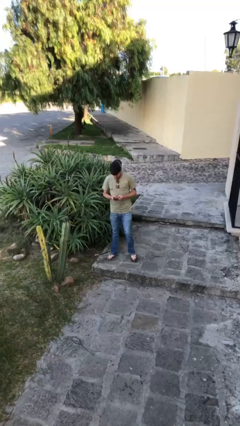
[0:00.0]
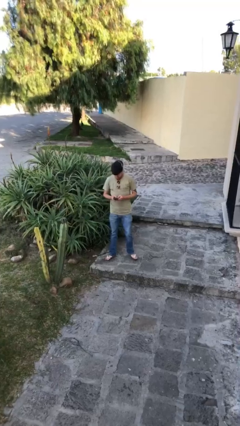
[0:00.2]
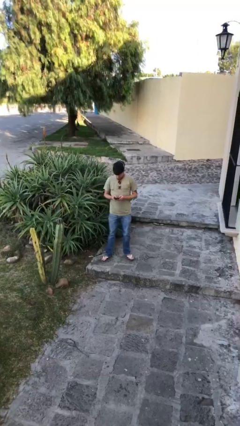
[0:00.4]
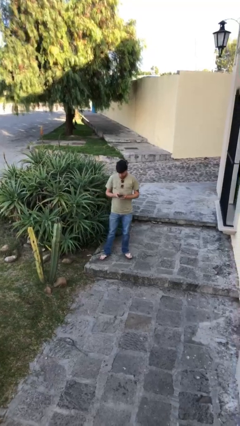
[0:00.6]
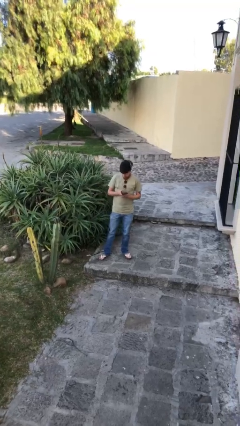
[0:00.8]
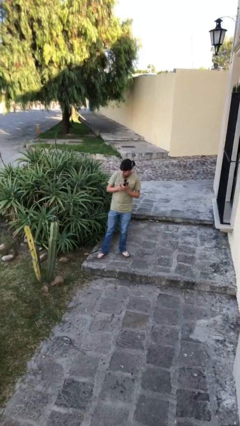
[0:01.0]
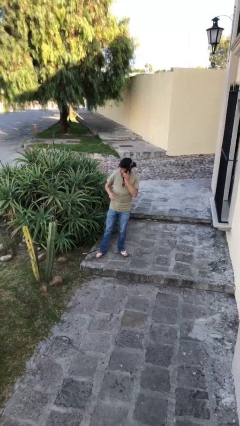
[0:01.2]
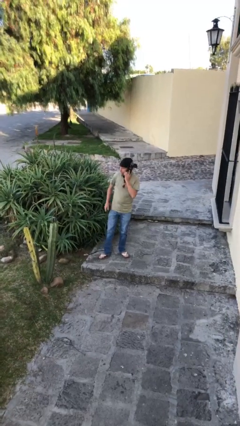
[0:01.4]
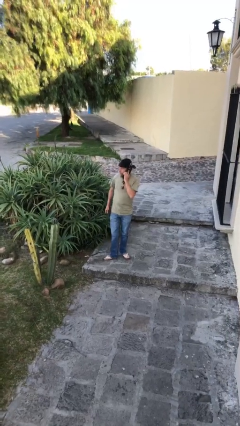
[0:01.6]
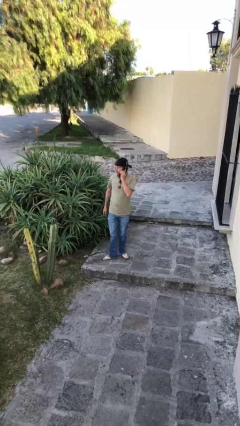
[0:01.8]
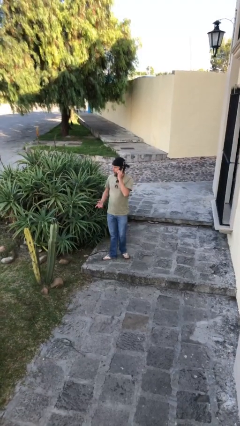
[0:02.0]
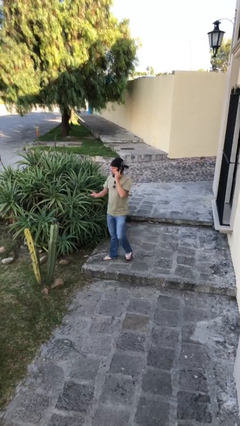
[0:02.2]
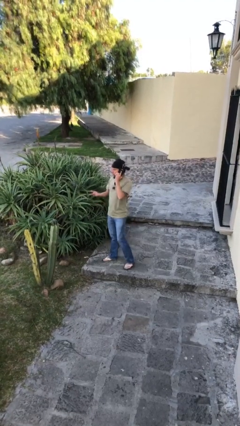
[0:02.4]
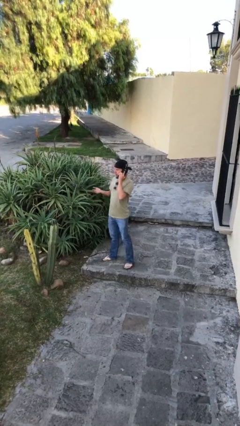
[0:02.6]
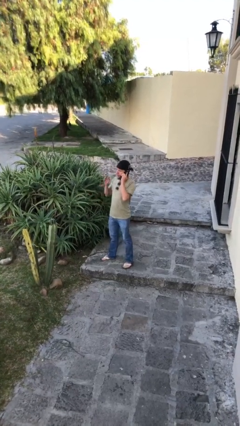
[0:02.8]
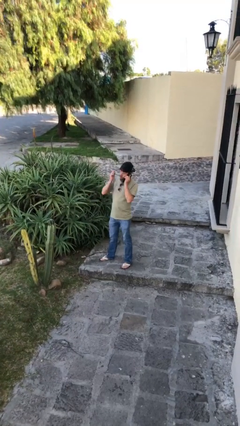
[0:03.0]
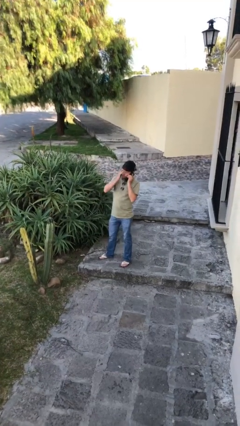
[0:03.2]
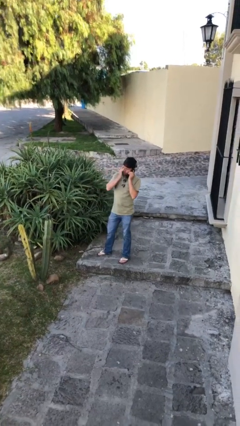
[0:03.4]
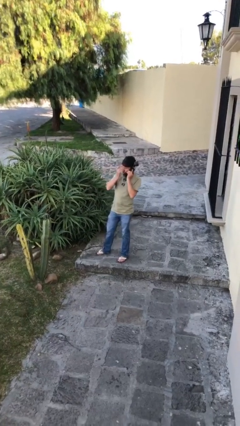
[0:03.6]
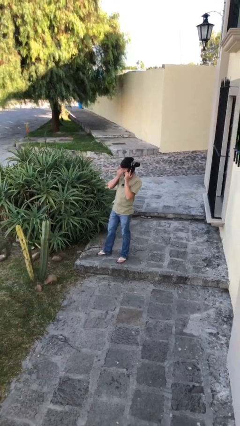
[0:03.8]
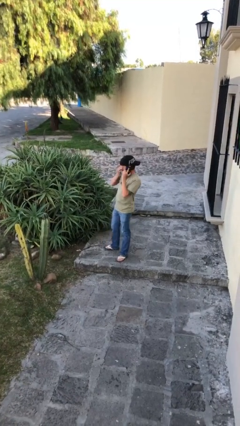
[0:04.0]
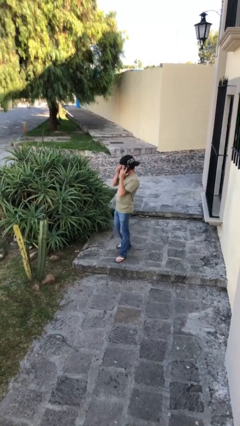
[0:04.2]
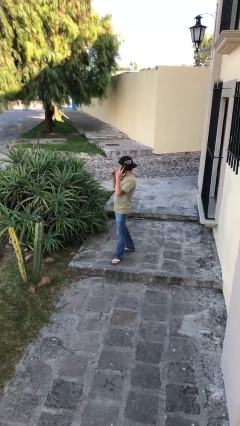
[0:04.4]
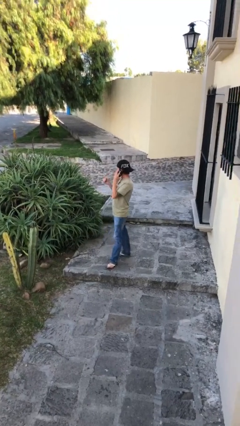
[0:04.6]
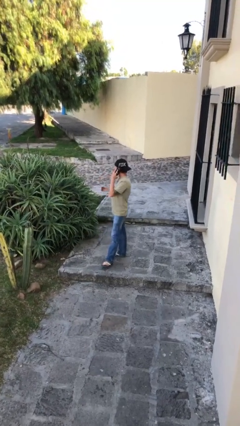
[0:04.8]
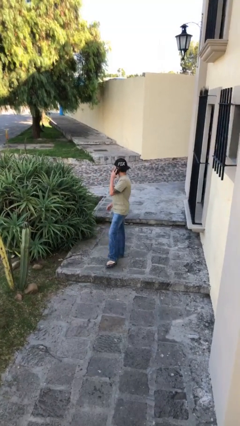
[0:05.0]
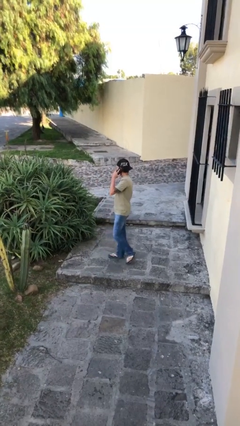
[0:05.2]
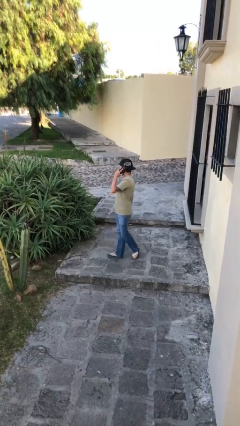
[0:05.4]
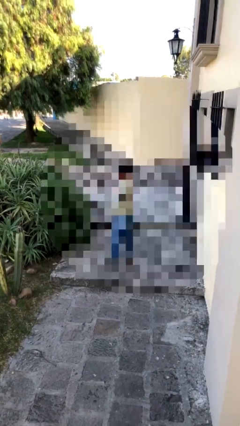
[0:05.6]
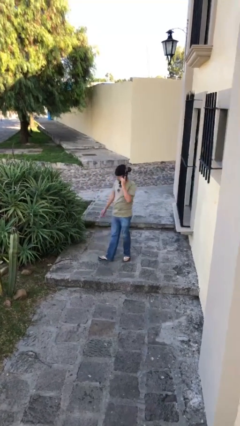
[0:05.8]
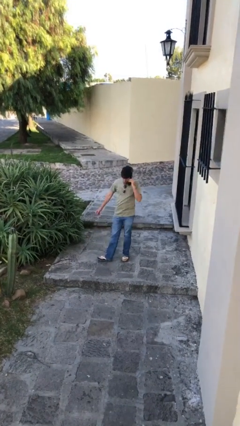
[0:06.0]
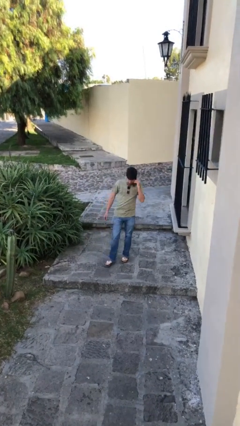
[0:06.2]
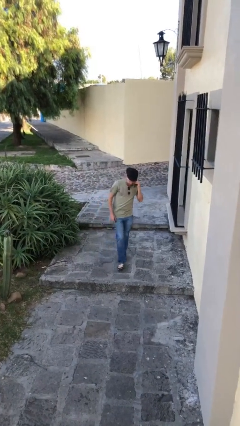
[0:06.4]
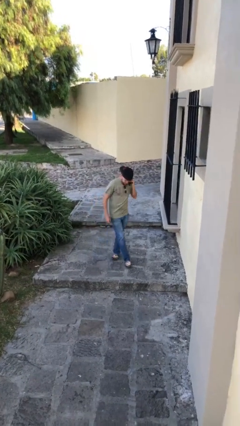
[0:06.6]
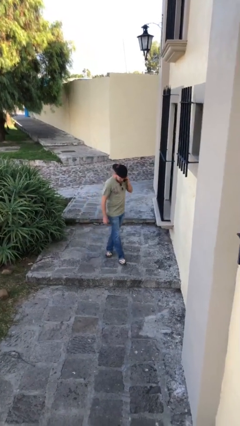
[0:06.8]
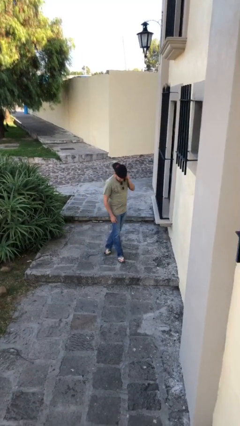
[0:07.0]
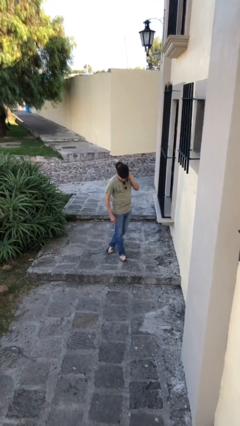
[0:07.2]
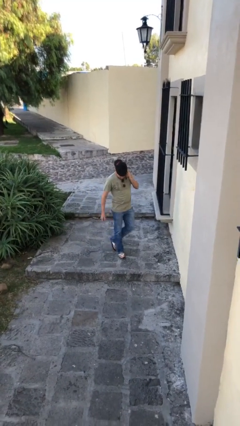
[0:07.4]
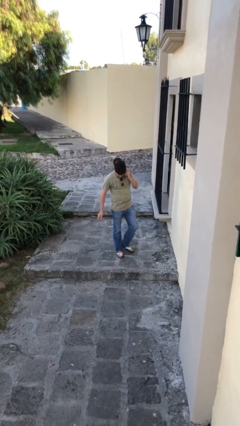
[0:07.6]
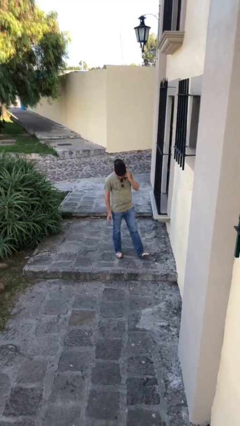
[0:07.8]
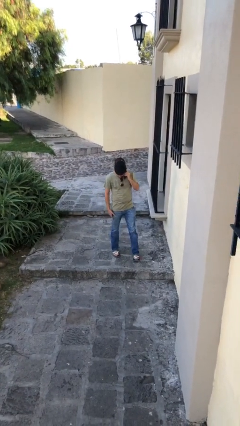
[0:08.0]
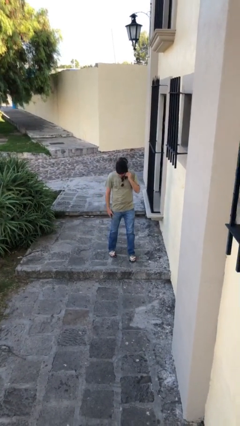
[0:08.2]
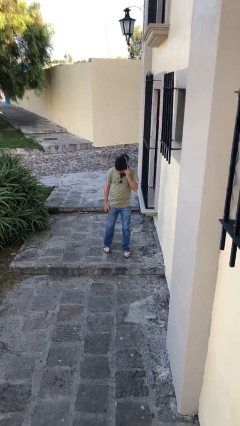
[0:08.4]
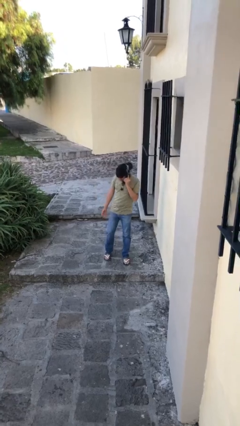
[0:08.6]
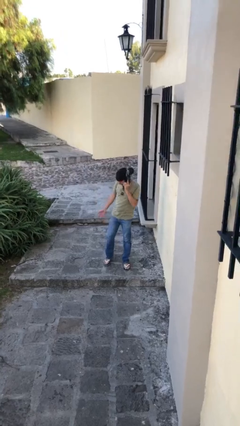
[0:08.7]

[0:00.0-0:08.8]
person talks on phone

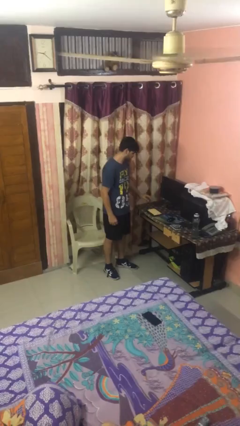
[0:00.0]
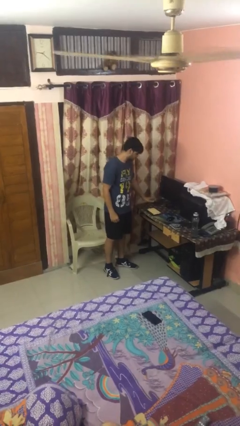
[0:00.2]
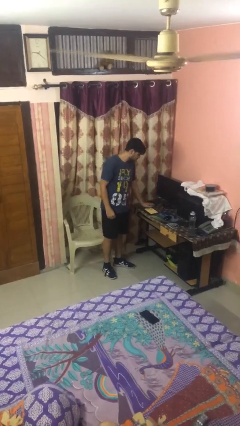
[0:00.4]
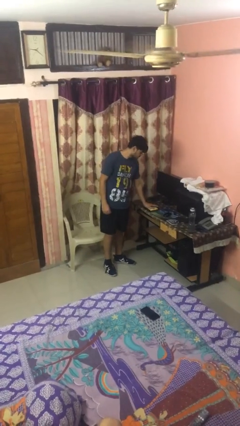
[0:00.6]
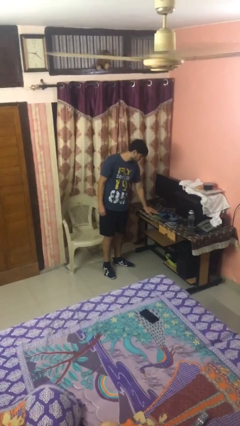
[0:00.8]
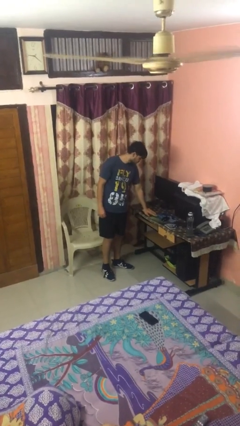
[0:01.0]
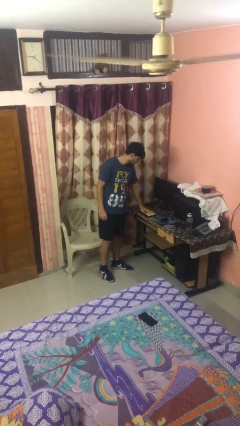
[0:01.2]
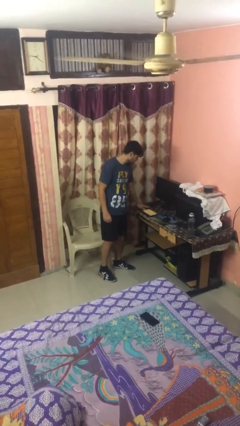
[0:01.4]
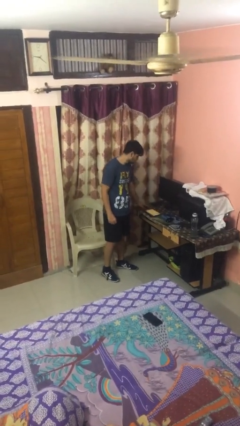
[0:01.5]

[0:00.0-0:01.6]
person waves hand over object

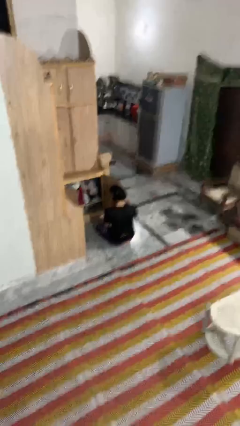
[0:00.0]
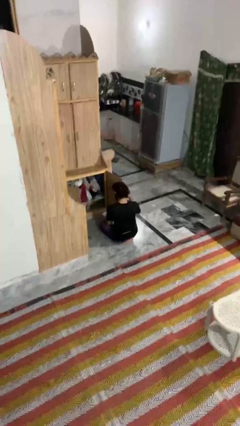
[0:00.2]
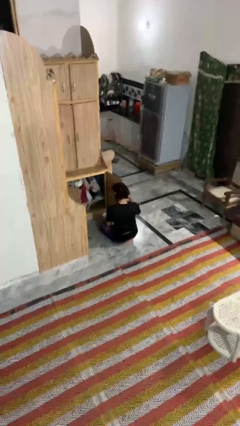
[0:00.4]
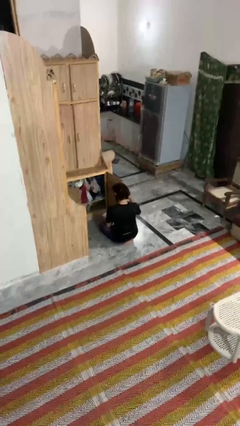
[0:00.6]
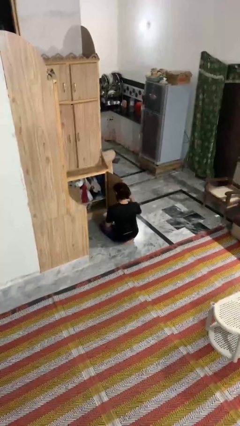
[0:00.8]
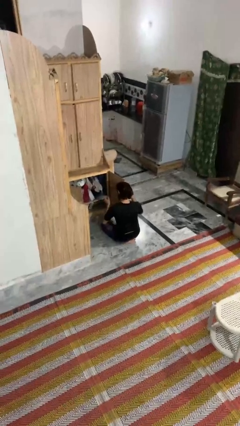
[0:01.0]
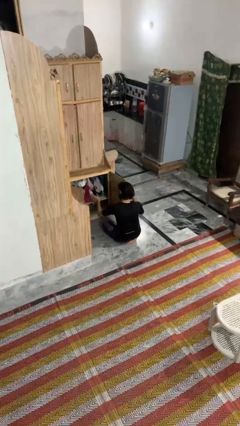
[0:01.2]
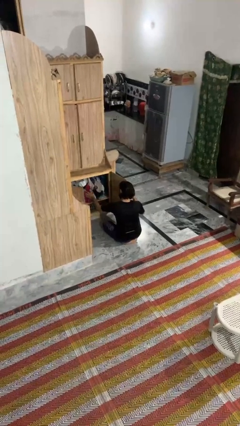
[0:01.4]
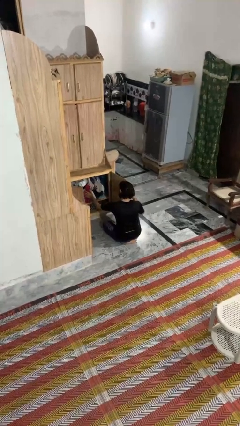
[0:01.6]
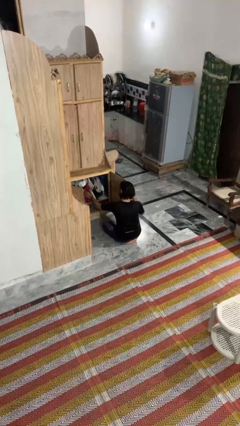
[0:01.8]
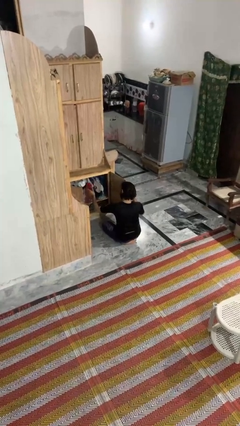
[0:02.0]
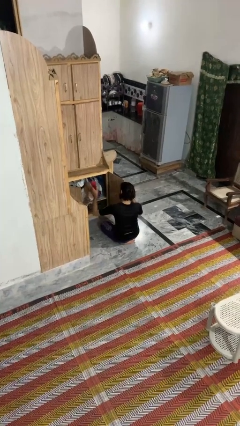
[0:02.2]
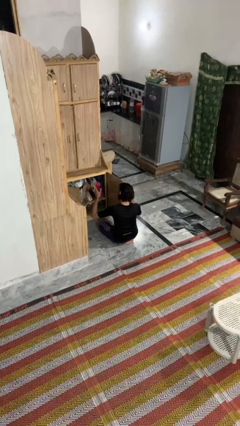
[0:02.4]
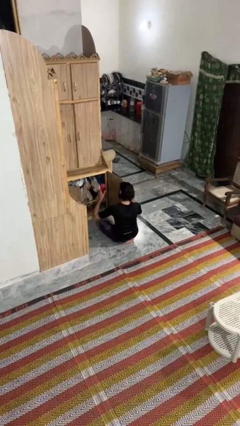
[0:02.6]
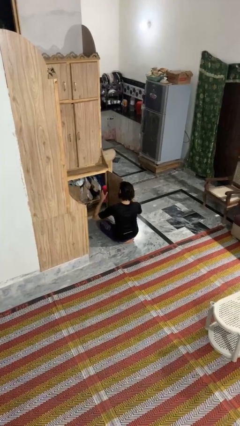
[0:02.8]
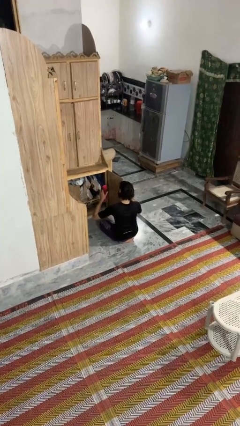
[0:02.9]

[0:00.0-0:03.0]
person picks up object from cabinet

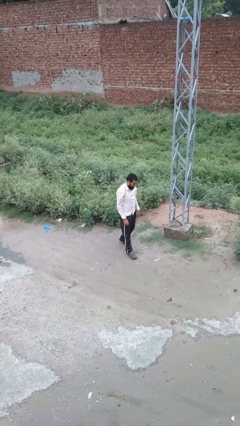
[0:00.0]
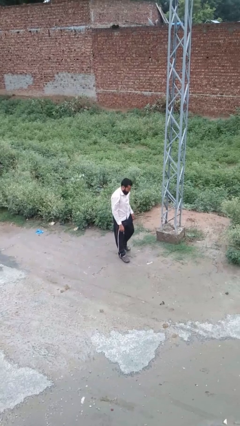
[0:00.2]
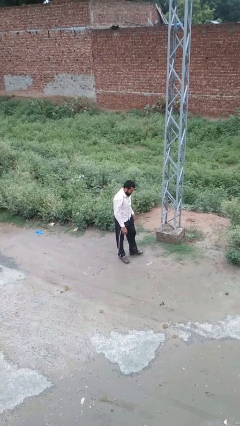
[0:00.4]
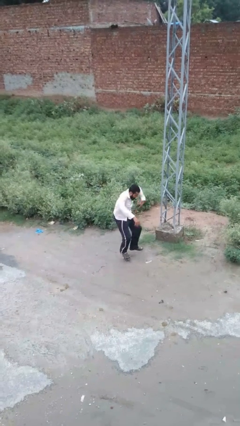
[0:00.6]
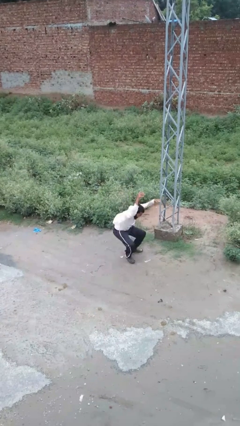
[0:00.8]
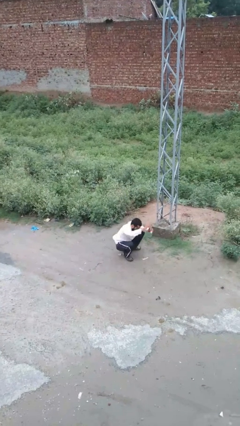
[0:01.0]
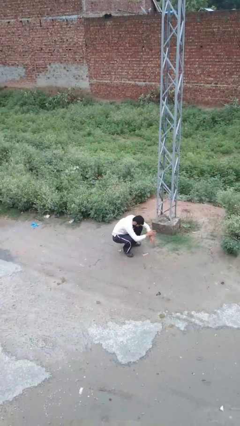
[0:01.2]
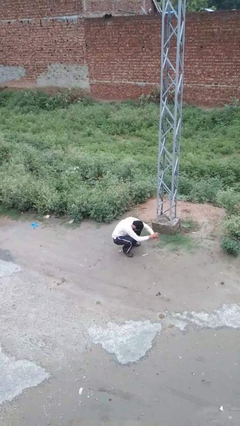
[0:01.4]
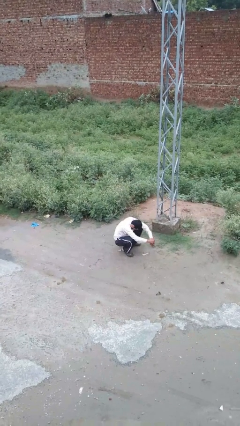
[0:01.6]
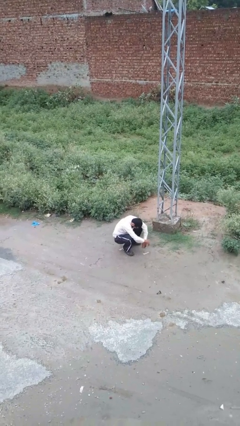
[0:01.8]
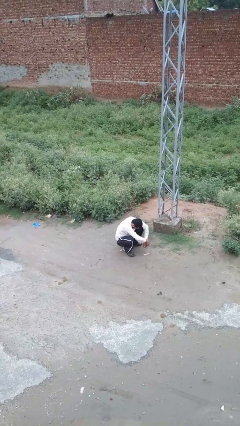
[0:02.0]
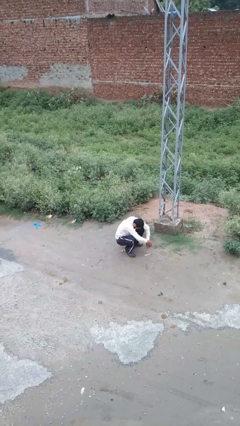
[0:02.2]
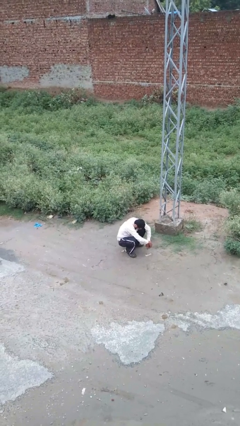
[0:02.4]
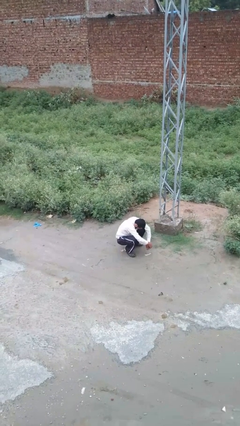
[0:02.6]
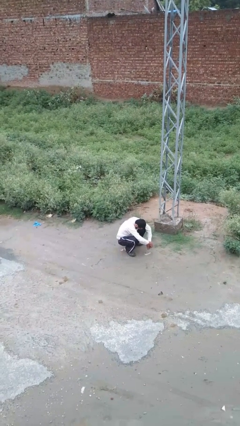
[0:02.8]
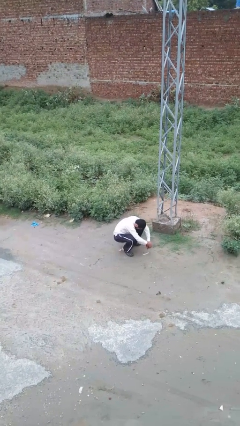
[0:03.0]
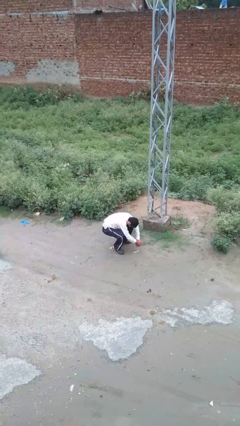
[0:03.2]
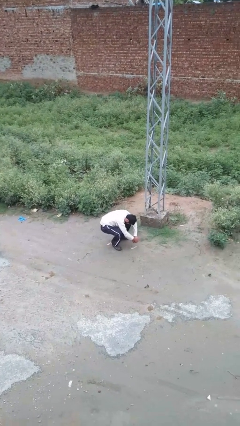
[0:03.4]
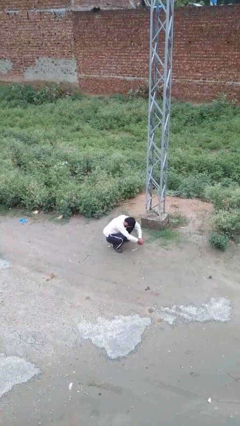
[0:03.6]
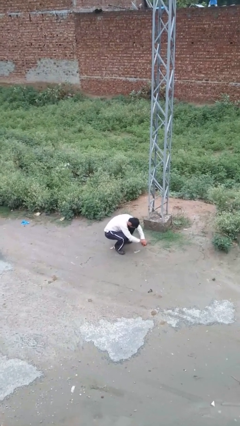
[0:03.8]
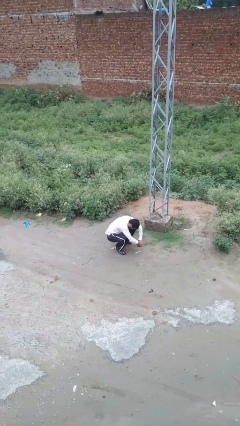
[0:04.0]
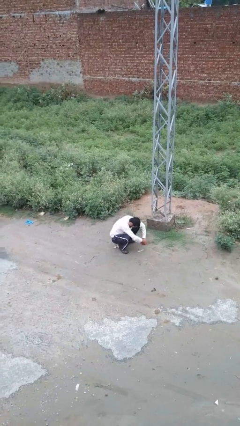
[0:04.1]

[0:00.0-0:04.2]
person trips on object on floor
